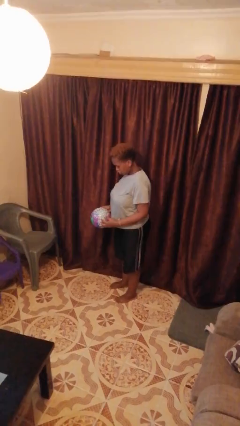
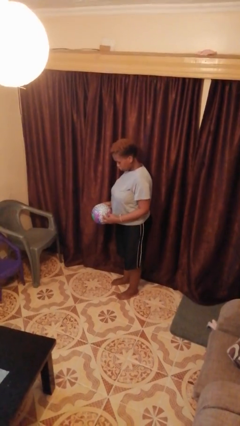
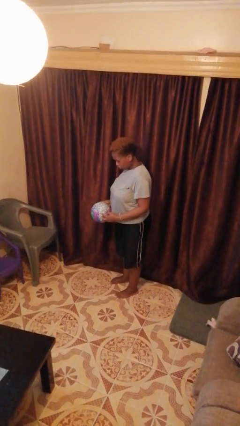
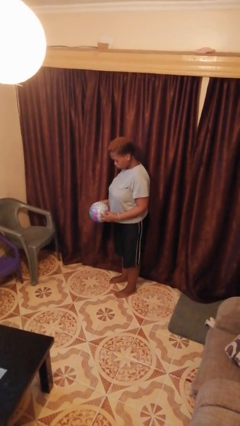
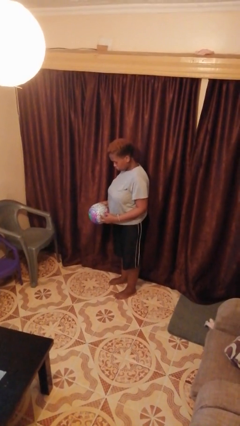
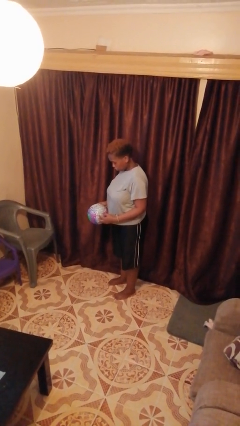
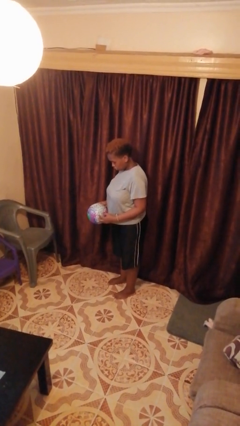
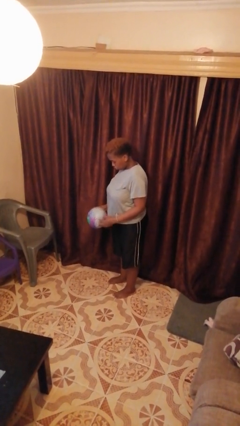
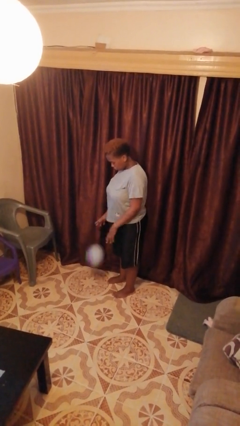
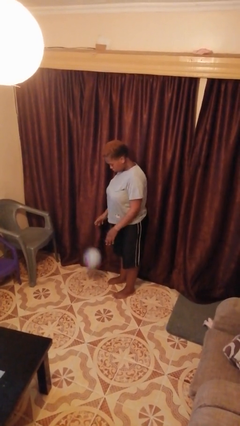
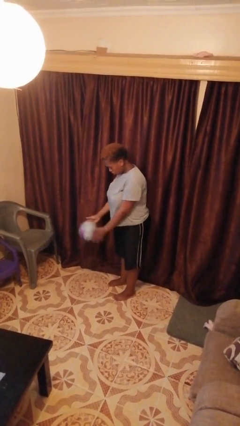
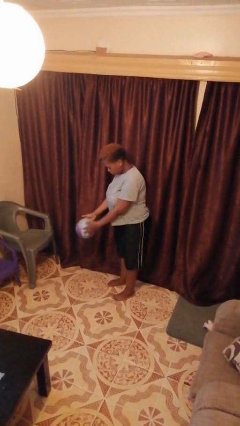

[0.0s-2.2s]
person bounces ball on floor

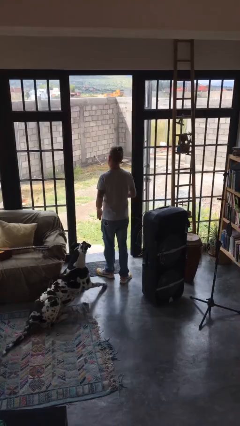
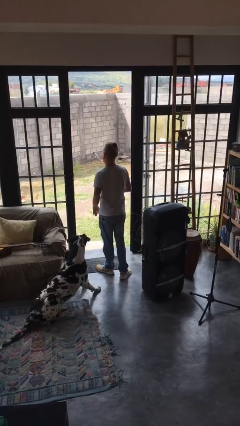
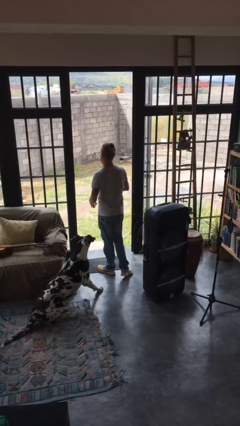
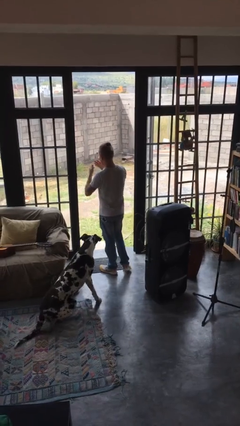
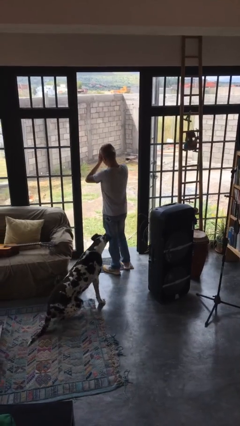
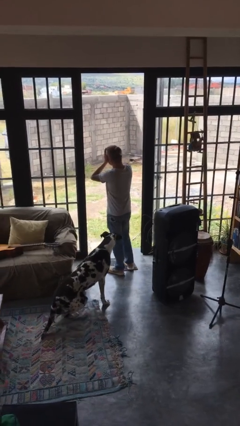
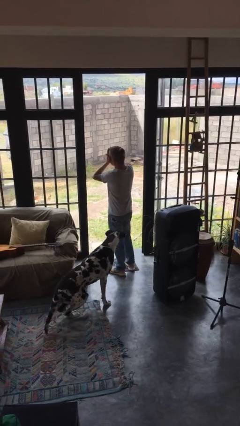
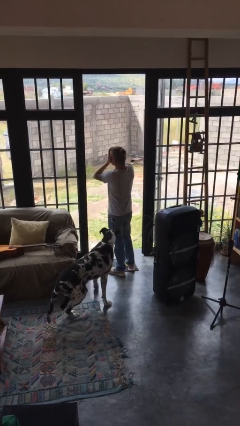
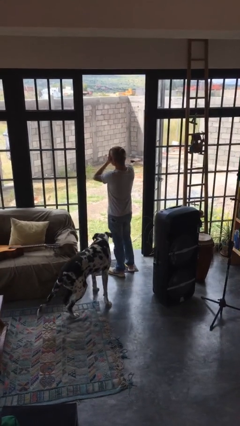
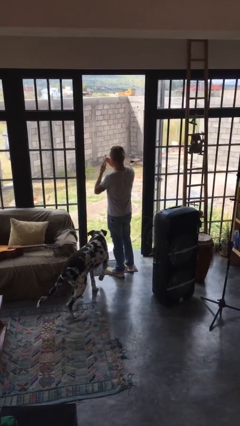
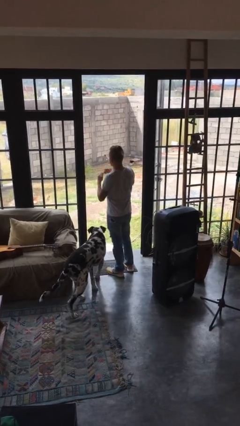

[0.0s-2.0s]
person shades eyes

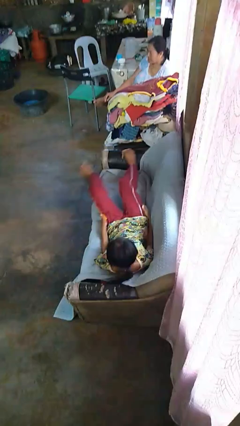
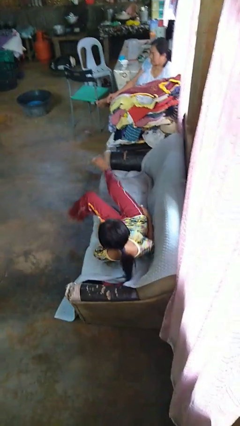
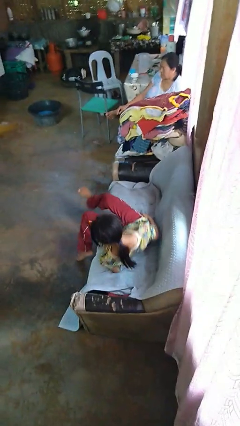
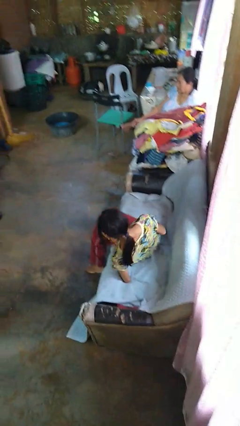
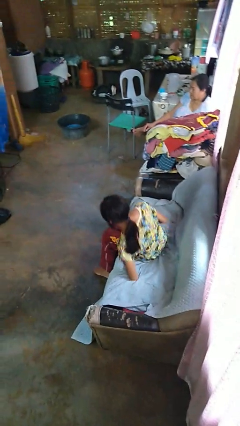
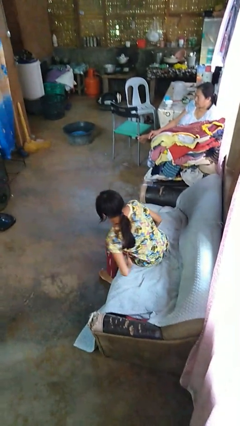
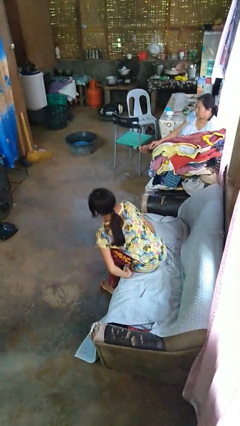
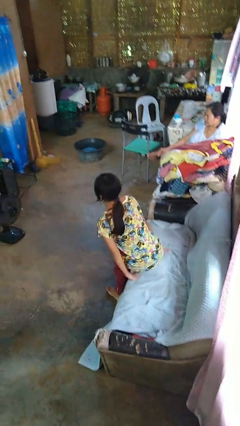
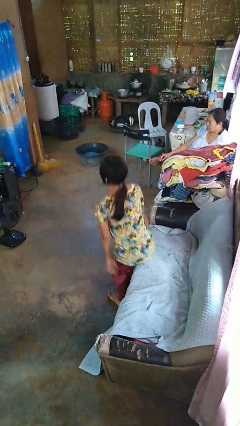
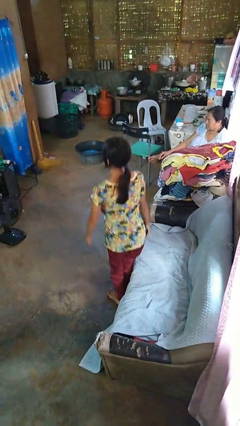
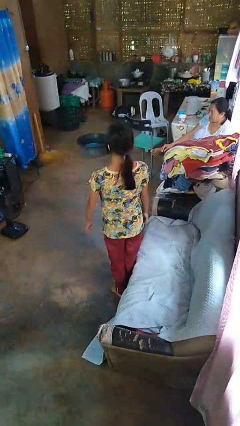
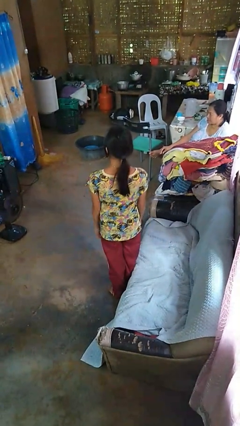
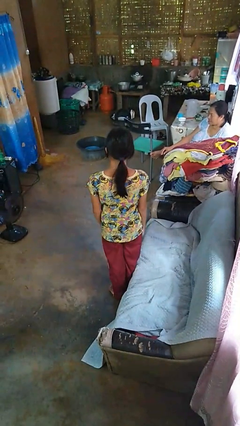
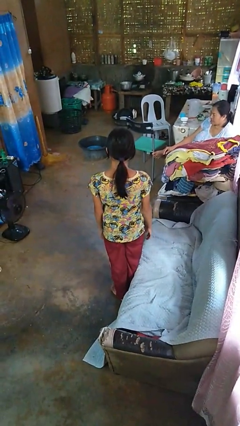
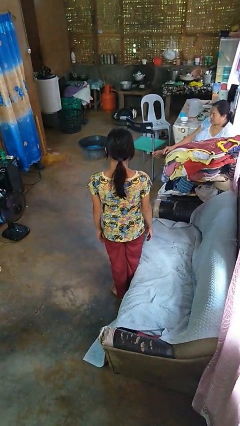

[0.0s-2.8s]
person stands up

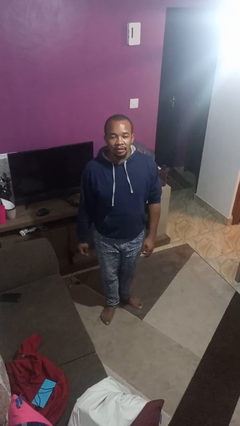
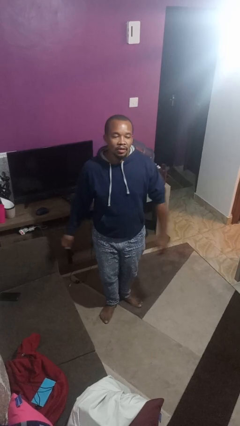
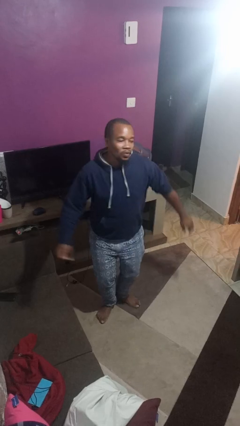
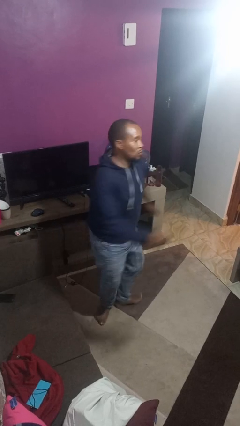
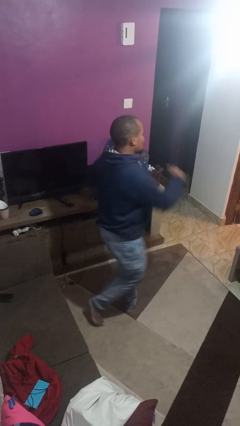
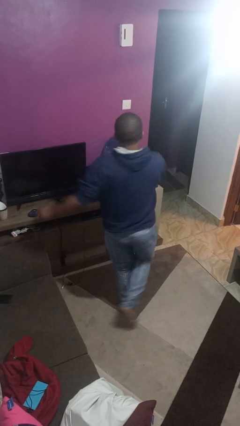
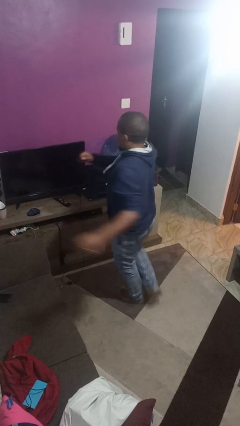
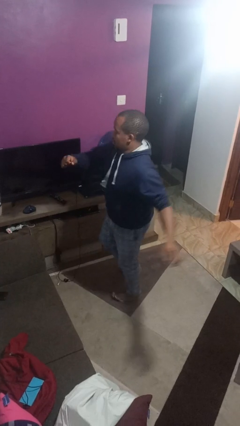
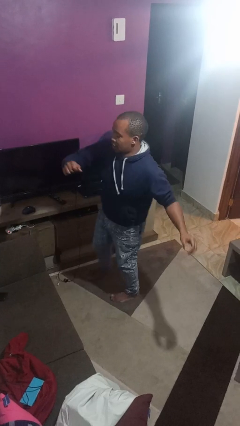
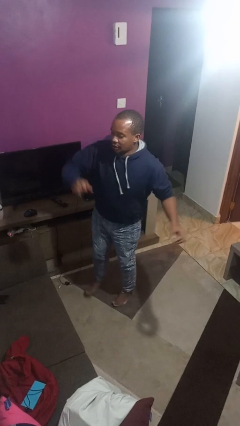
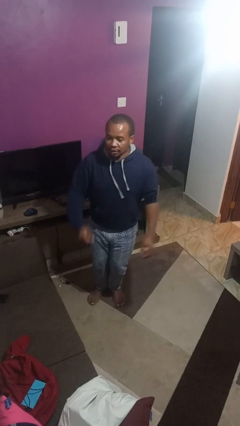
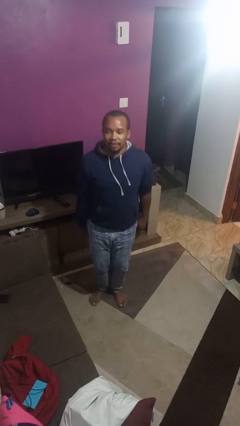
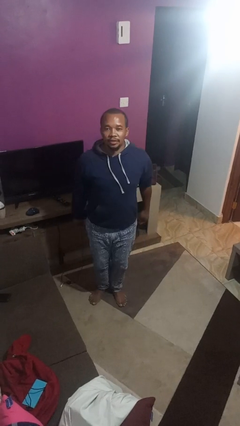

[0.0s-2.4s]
person twirls

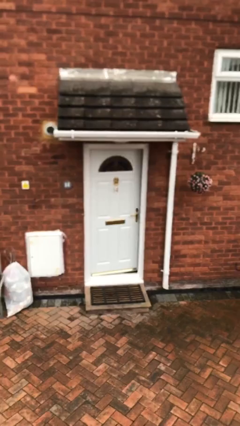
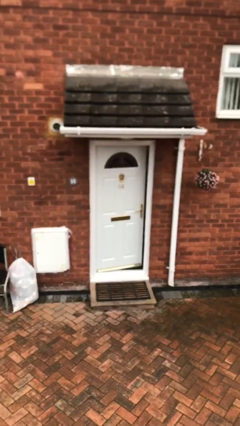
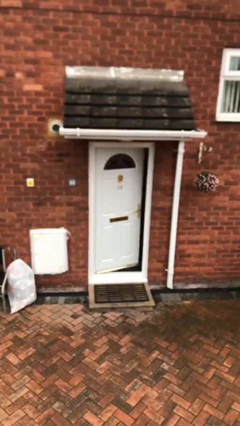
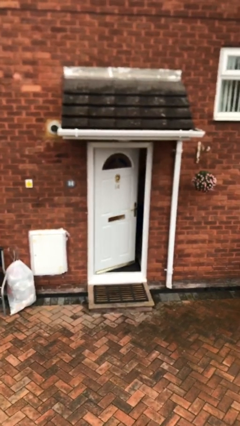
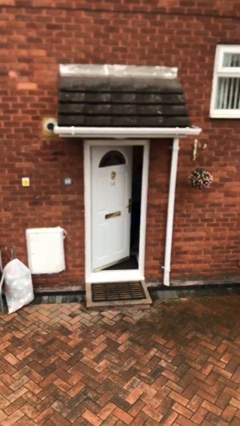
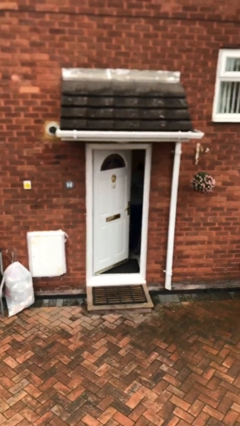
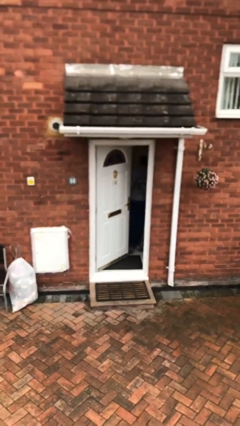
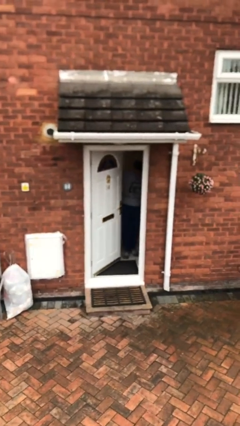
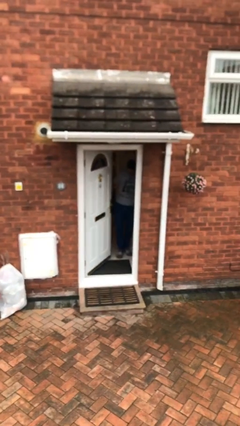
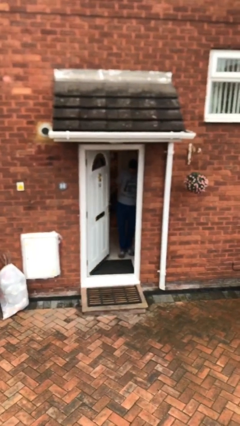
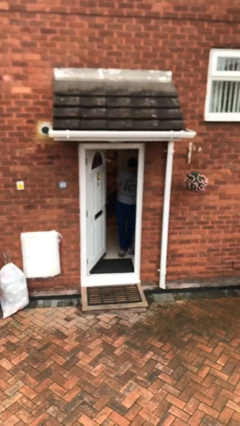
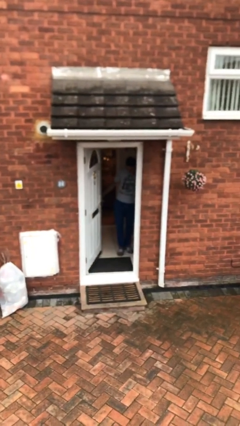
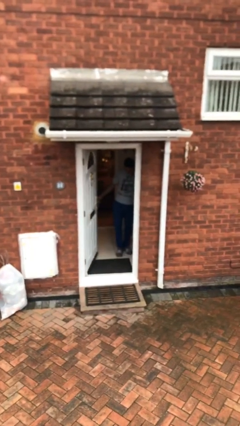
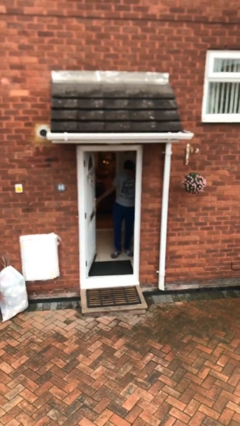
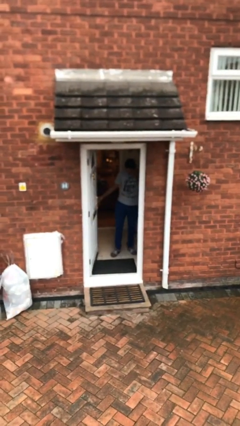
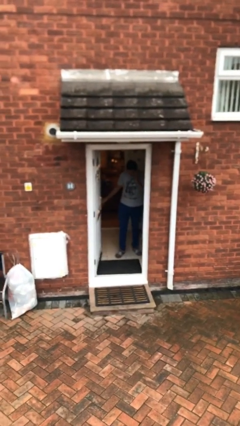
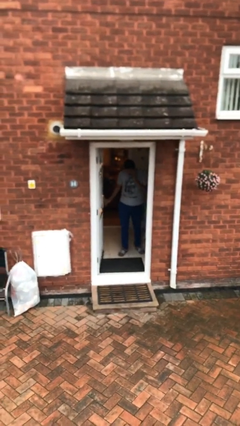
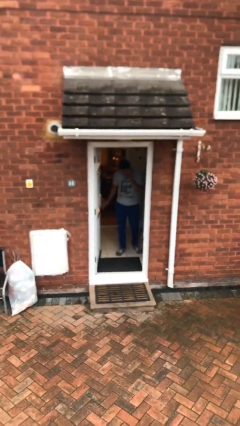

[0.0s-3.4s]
person opens facility door

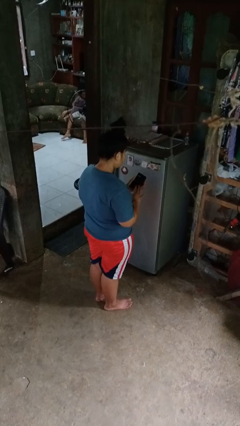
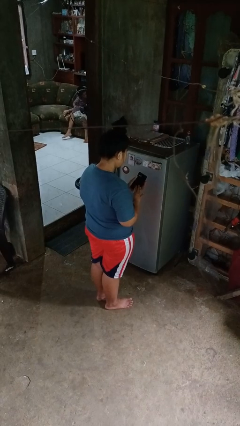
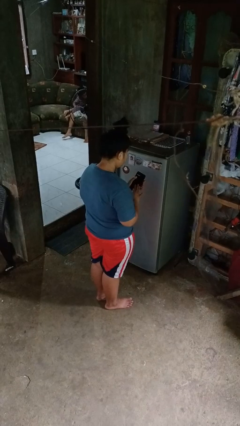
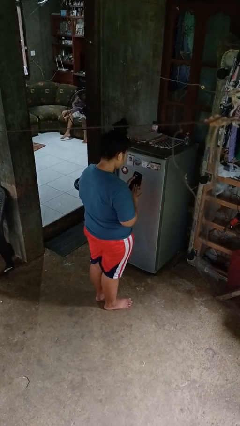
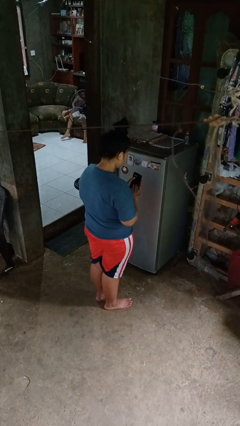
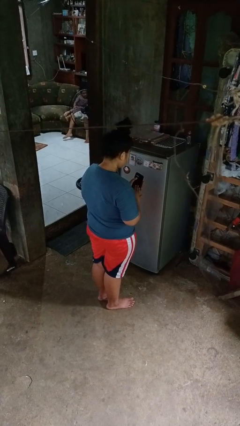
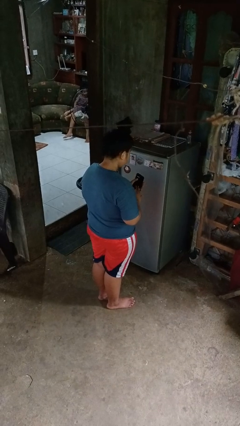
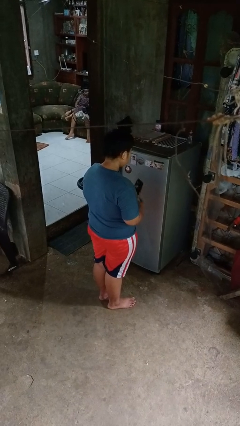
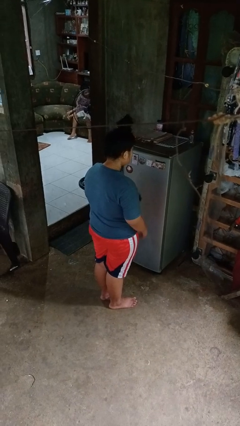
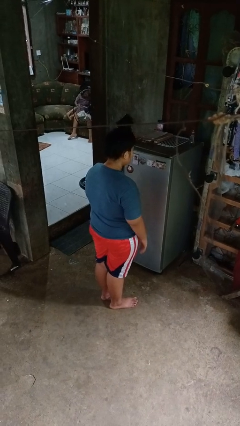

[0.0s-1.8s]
person taps object with finger

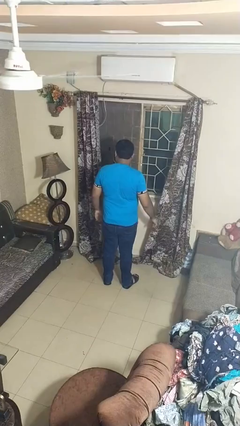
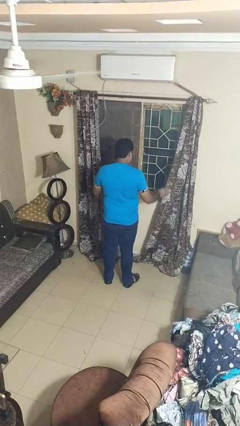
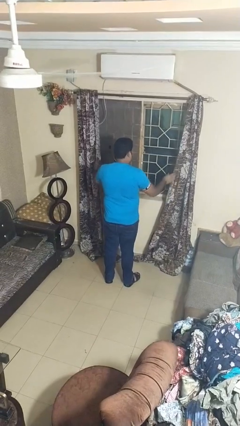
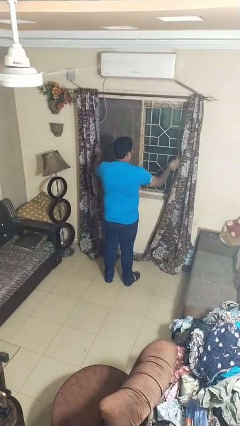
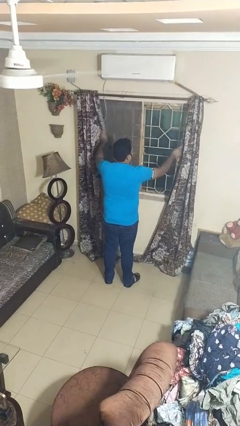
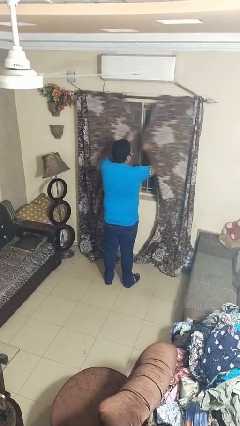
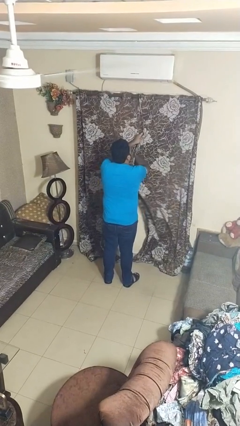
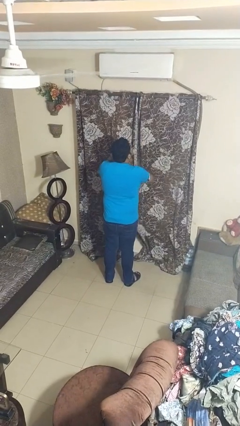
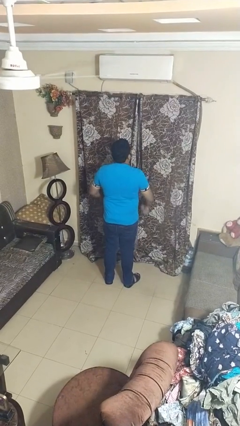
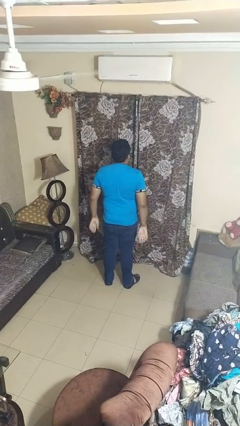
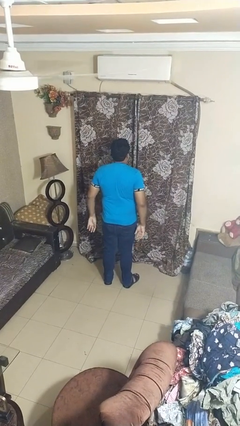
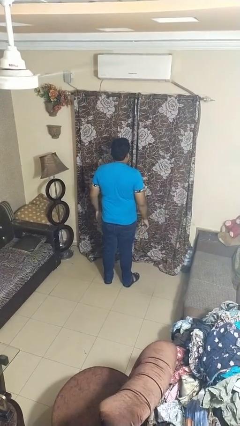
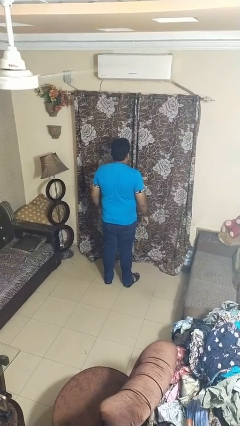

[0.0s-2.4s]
person closes curtains

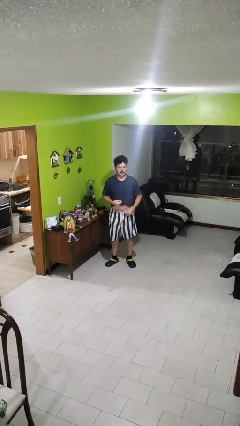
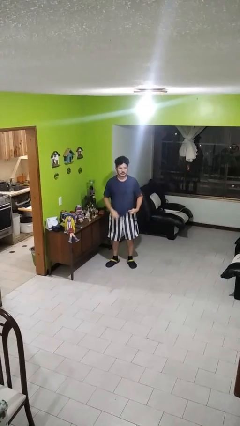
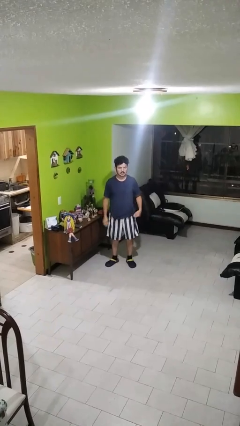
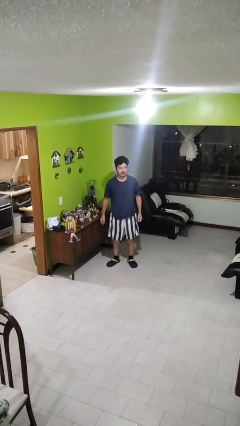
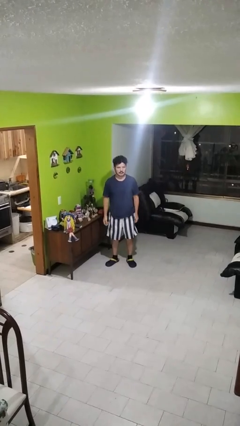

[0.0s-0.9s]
person untucks shirt
